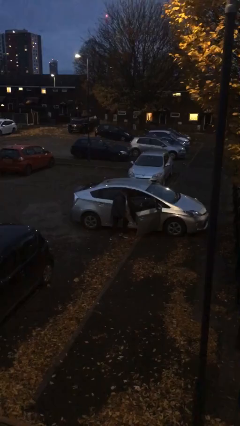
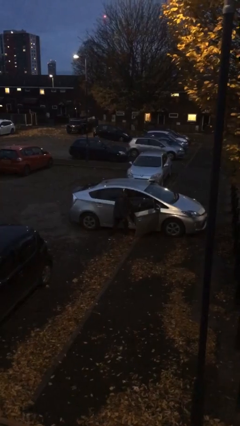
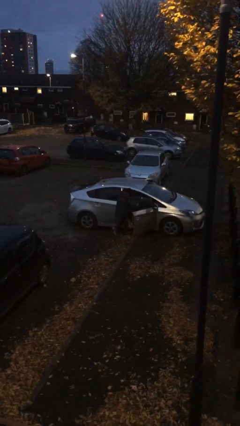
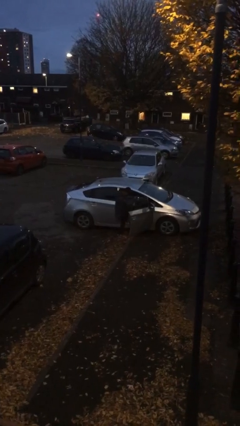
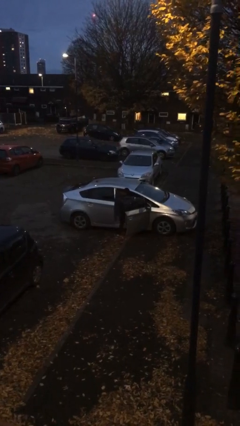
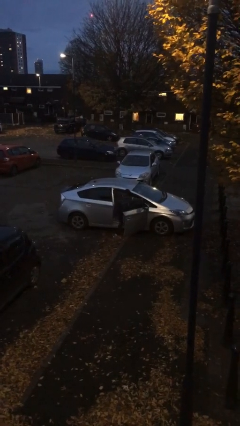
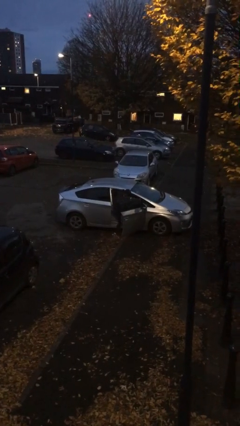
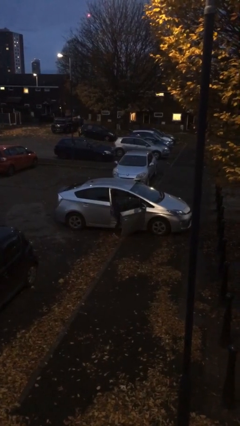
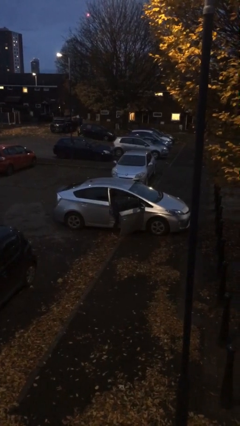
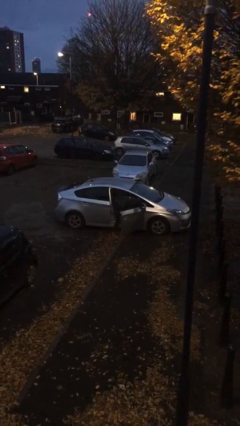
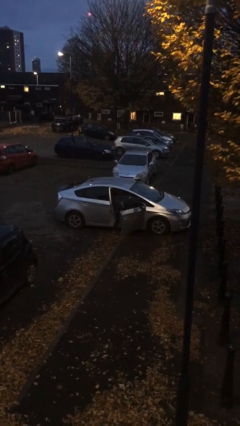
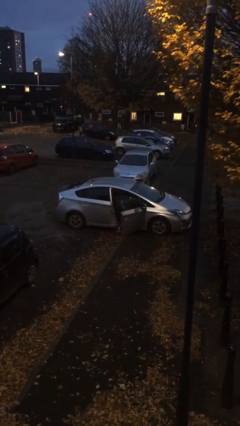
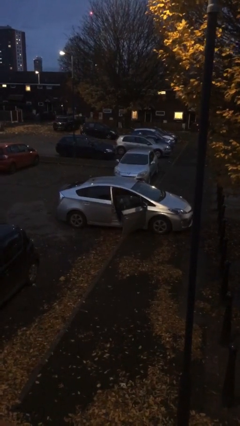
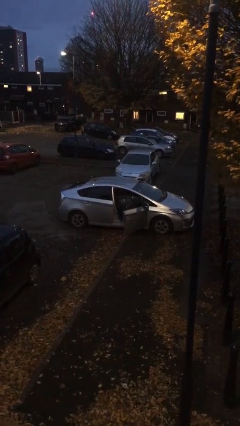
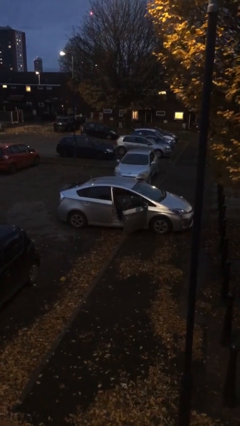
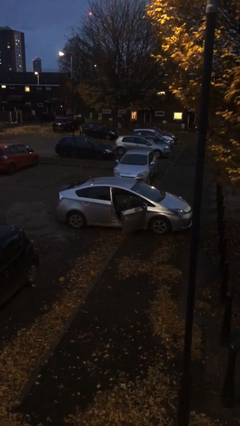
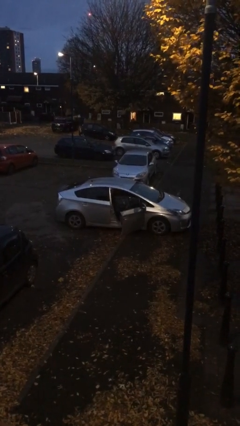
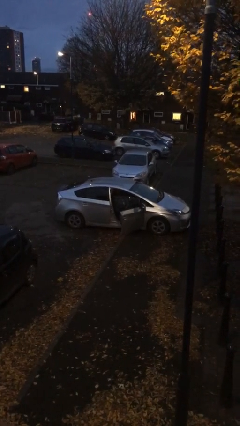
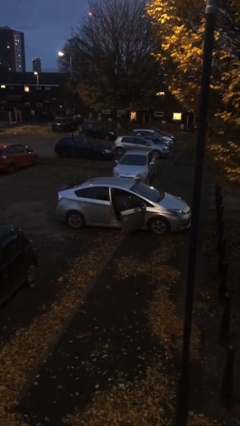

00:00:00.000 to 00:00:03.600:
person enters car

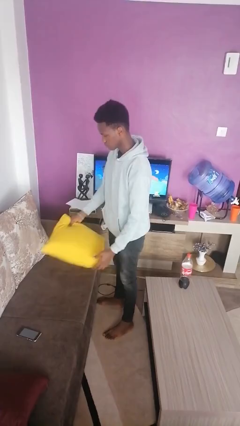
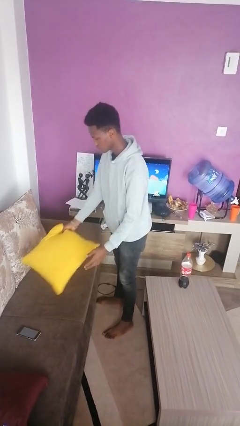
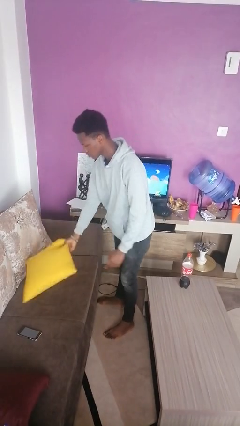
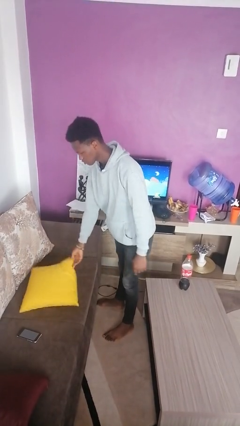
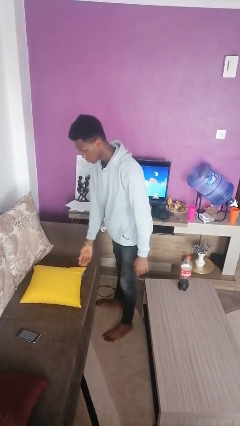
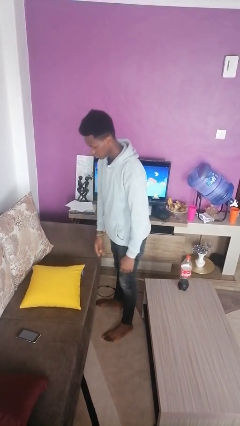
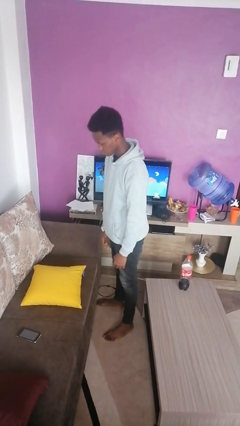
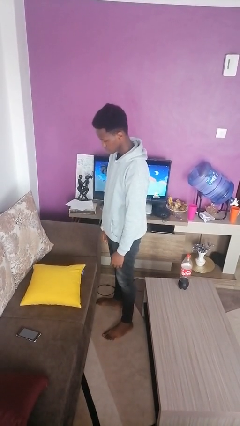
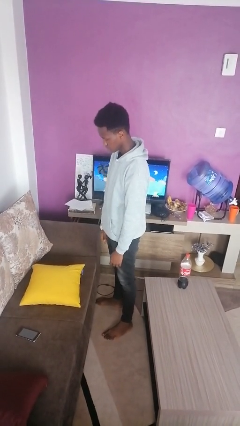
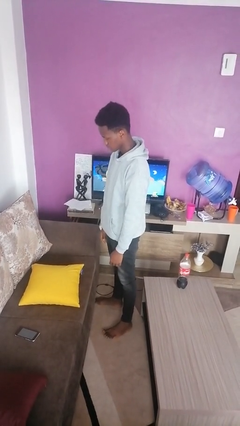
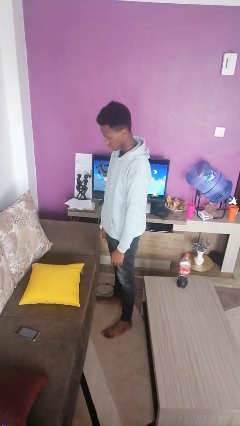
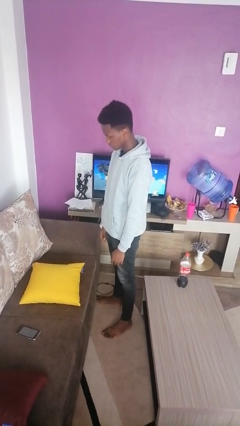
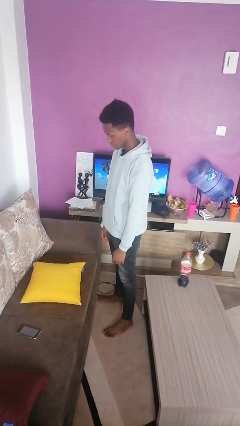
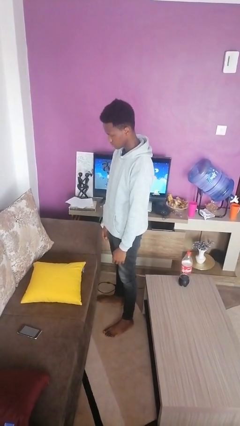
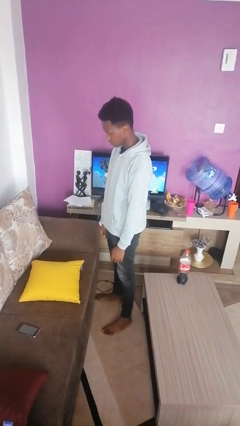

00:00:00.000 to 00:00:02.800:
person puts down object on couch

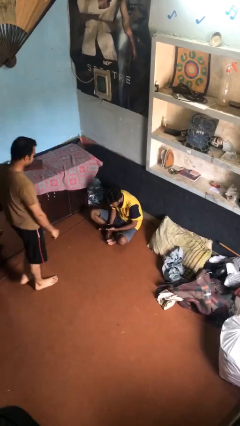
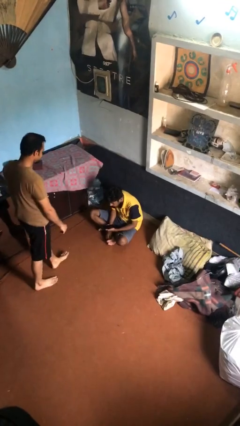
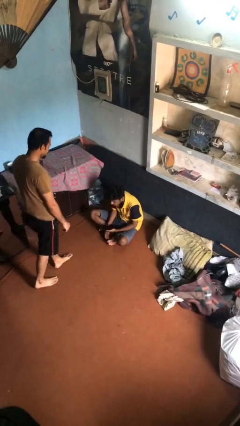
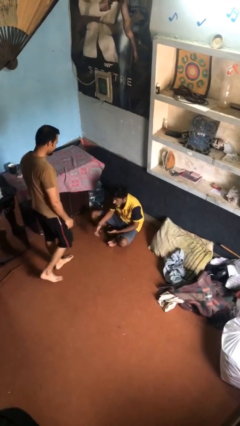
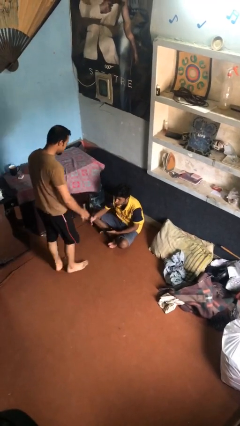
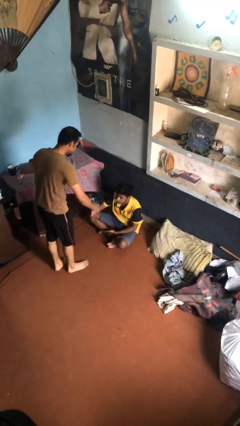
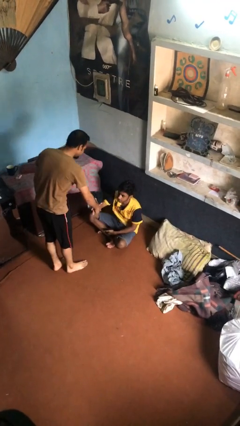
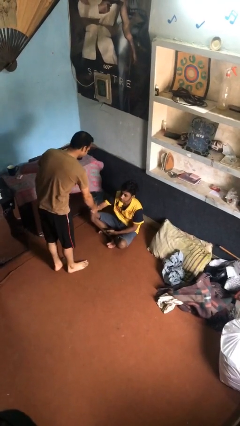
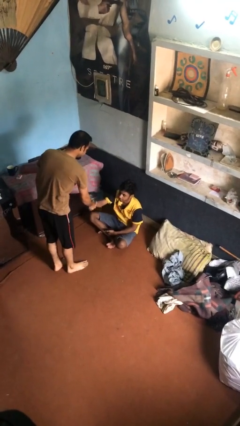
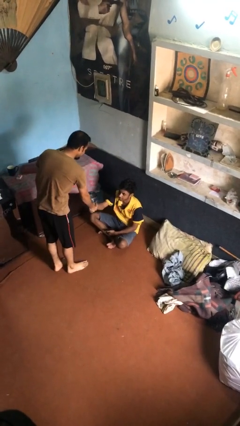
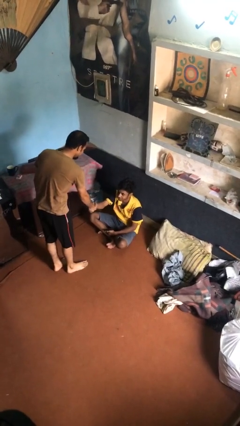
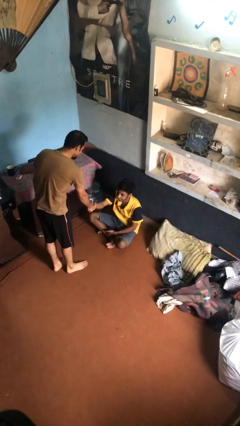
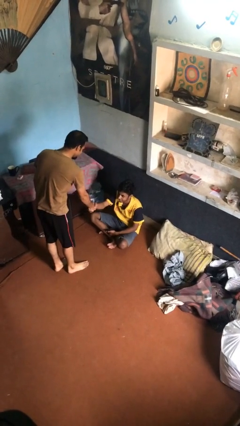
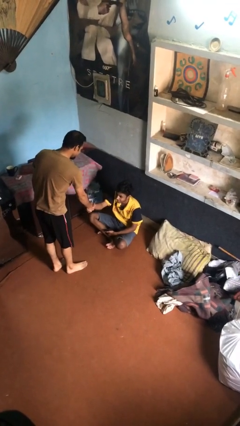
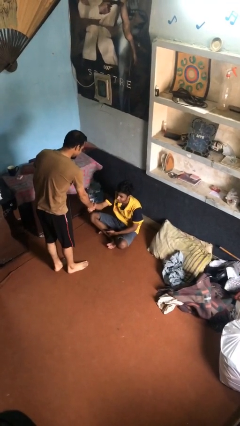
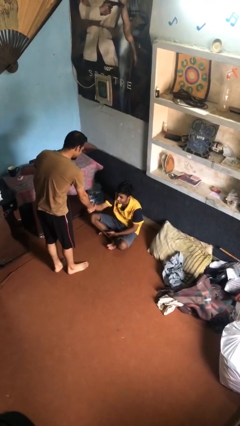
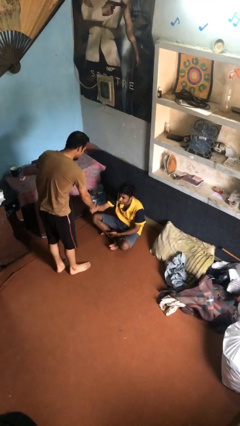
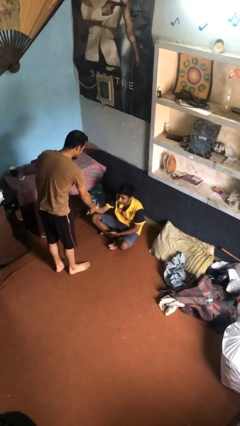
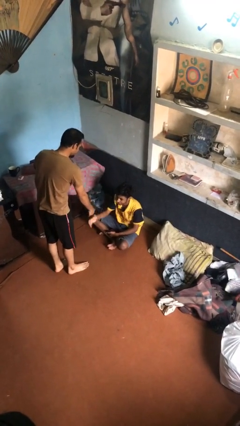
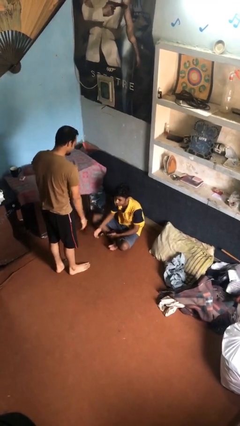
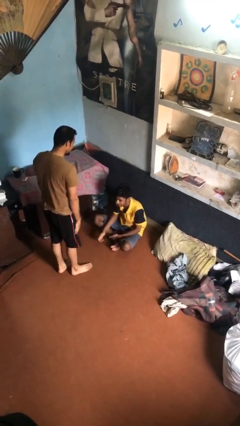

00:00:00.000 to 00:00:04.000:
person shakes hand

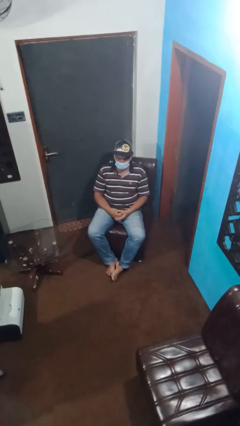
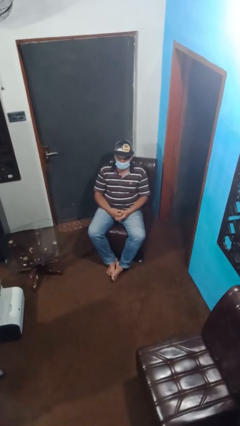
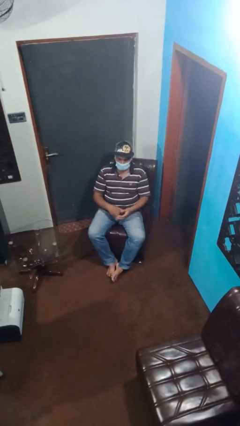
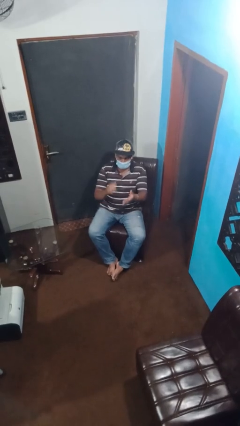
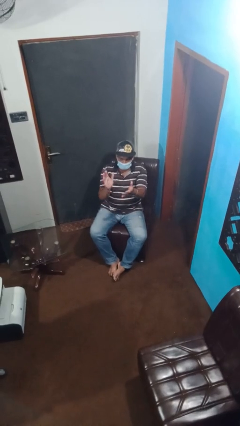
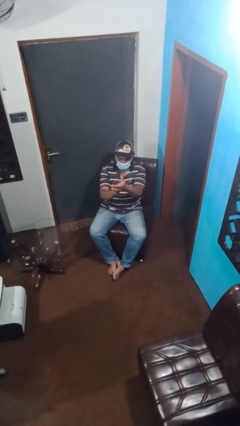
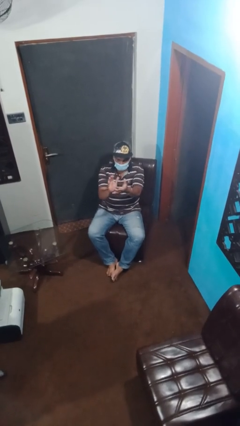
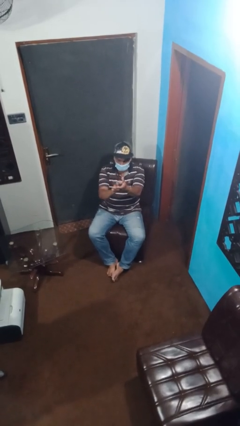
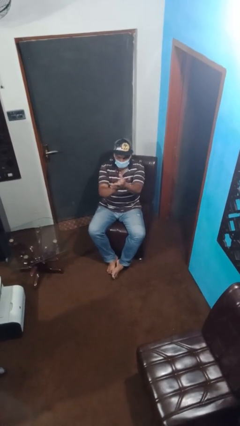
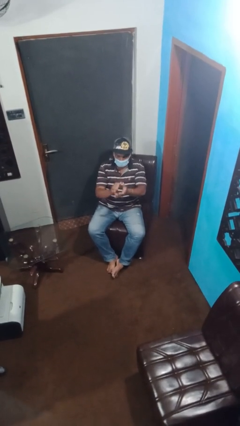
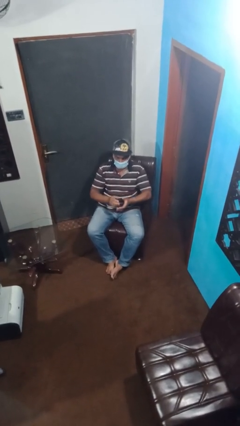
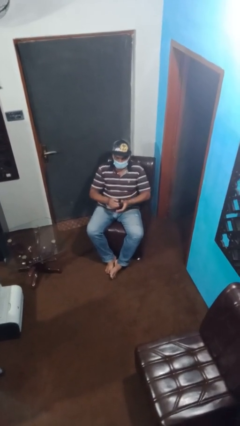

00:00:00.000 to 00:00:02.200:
person claps hands

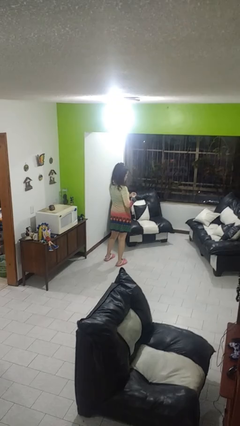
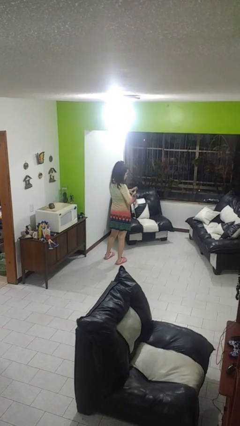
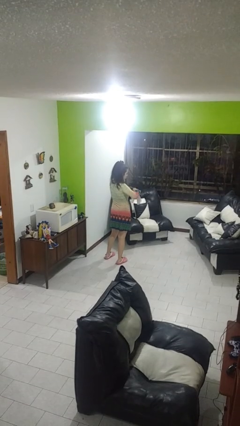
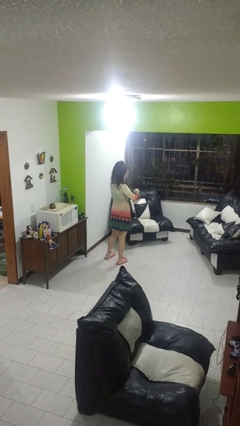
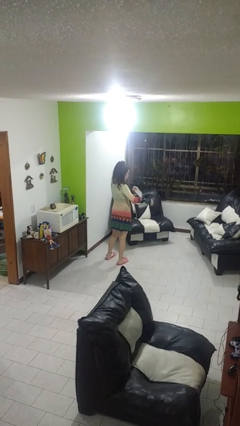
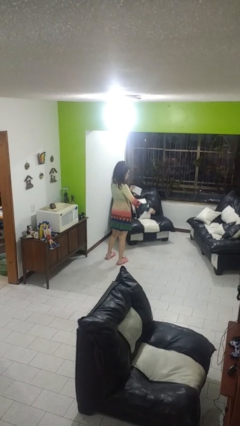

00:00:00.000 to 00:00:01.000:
person tears paper

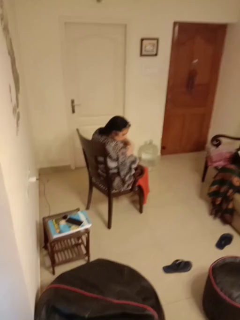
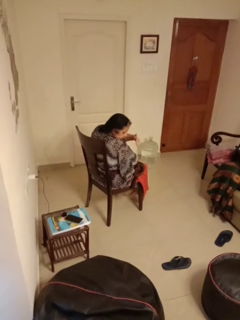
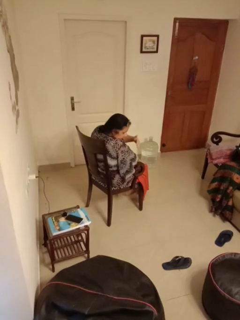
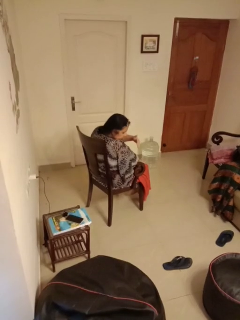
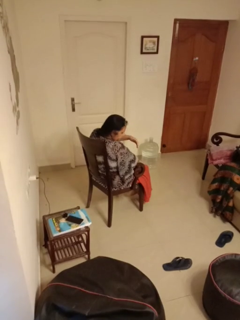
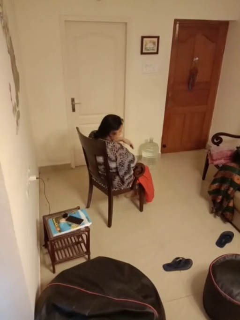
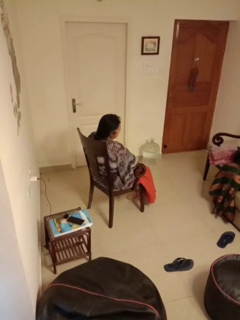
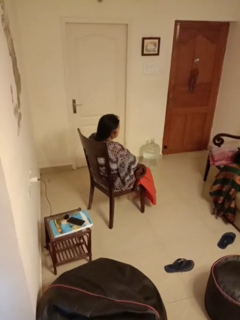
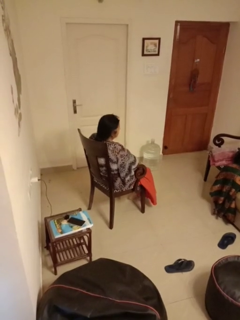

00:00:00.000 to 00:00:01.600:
person swats bug

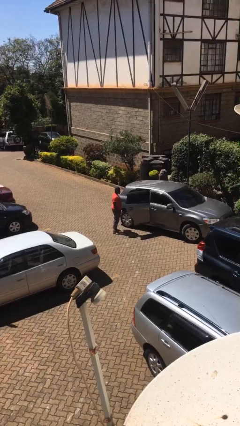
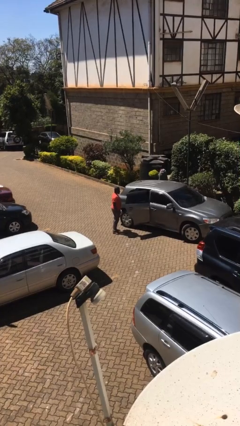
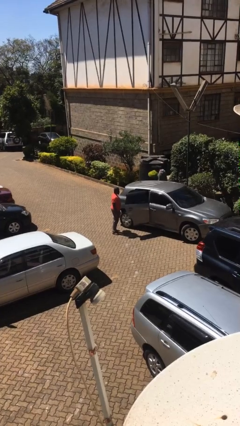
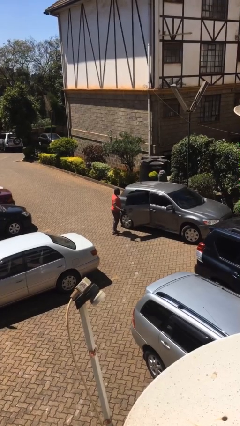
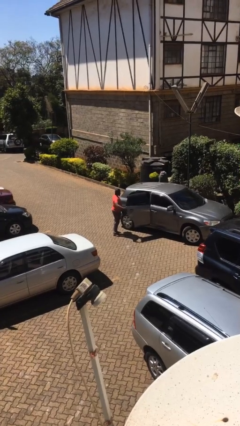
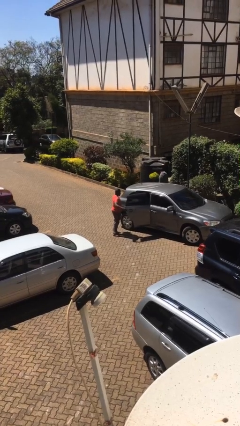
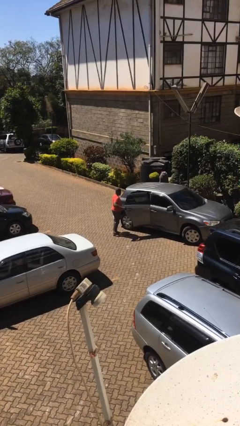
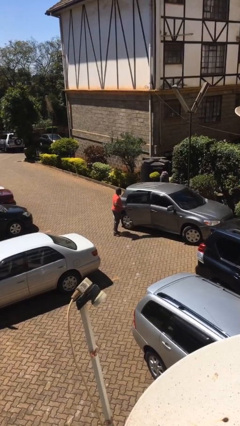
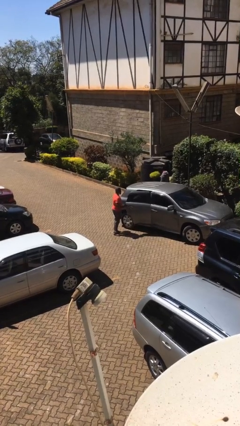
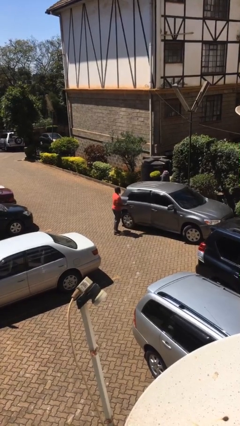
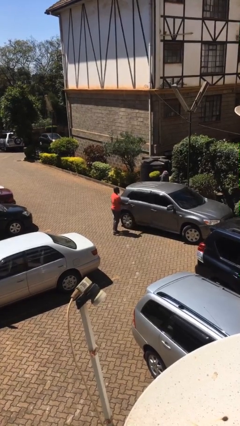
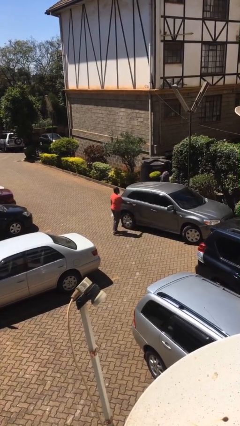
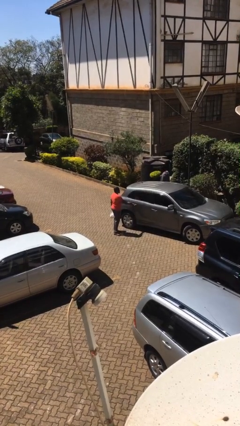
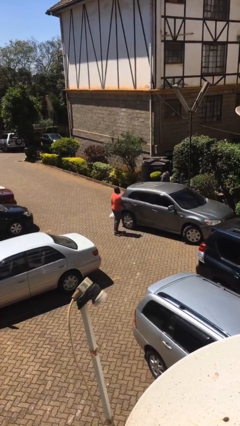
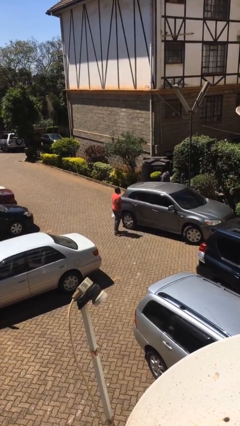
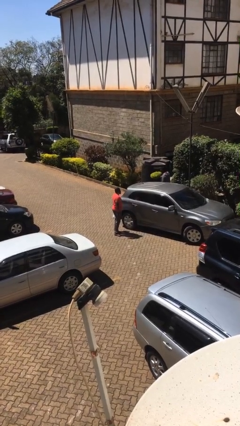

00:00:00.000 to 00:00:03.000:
person closes car door
